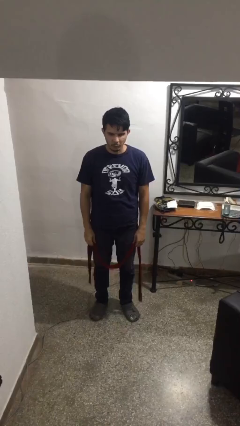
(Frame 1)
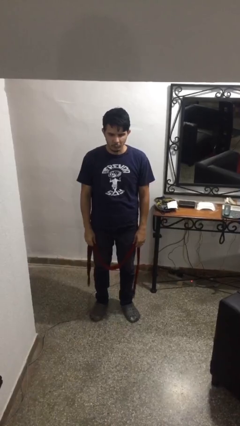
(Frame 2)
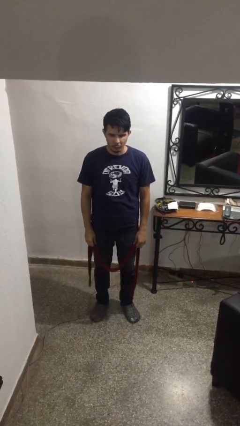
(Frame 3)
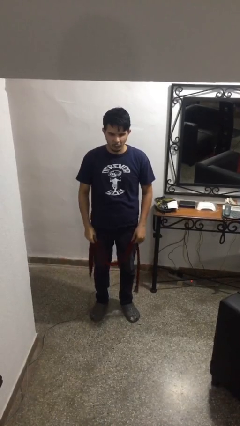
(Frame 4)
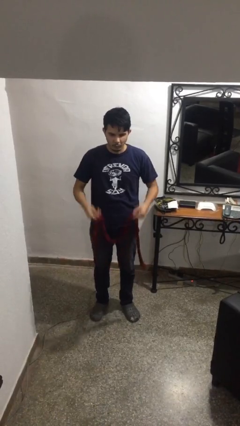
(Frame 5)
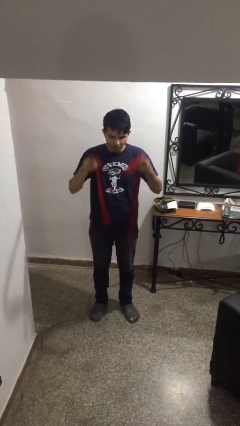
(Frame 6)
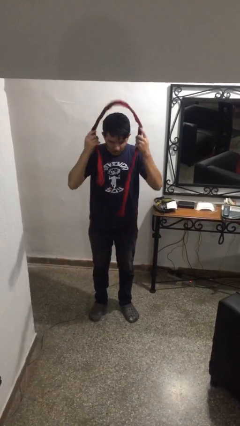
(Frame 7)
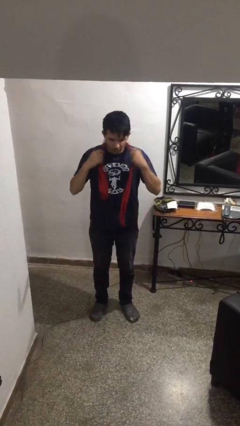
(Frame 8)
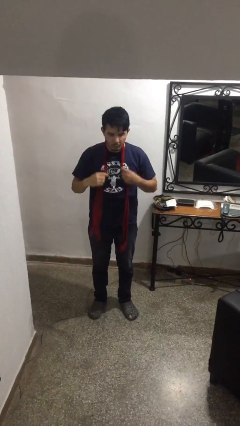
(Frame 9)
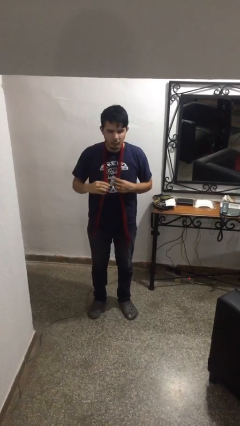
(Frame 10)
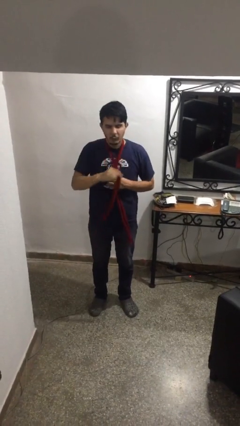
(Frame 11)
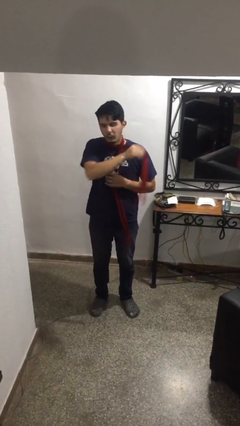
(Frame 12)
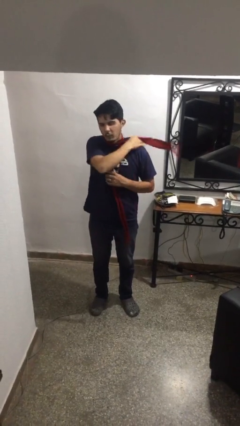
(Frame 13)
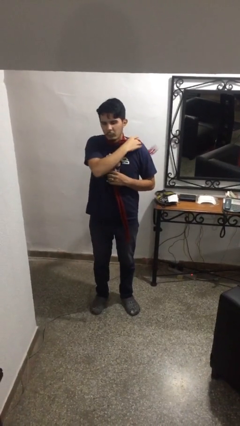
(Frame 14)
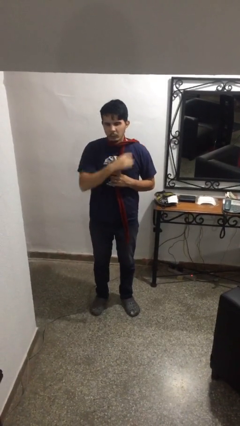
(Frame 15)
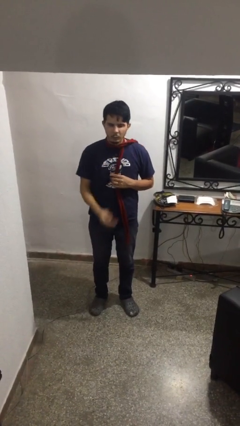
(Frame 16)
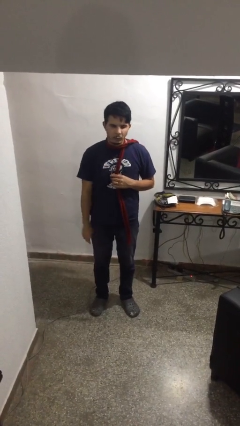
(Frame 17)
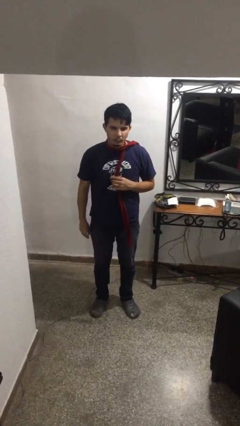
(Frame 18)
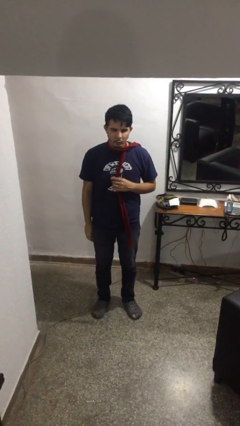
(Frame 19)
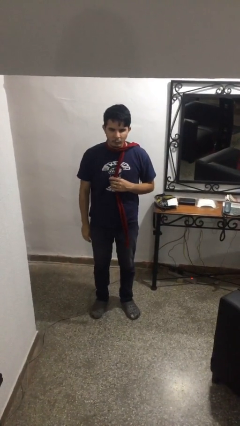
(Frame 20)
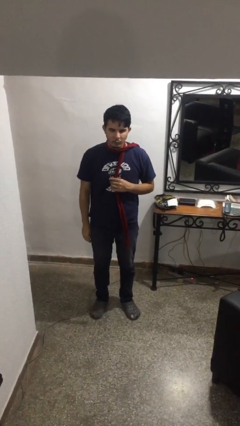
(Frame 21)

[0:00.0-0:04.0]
person puts on scarf

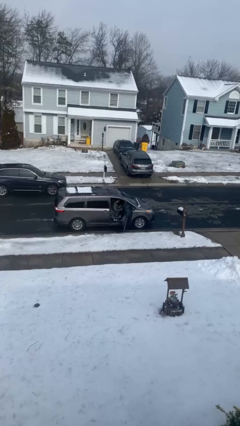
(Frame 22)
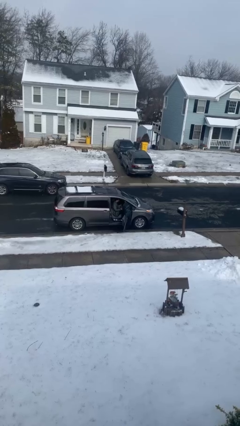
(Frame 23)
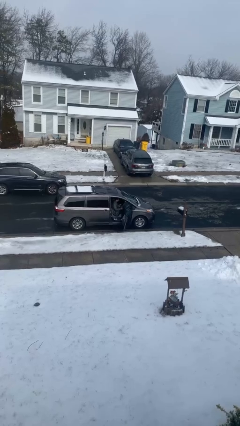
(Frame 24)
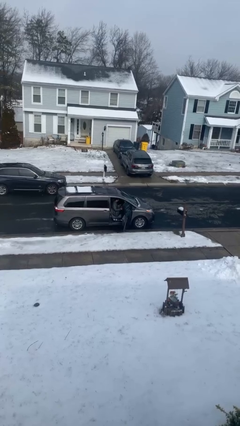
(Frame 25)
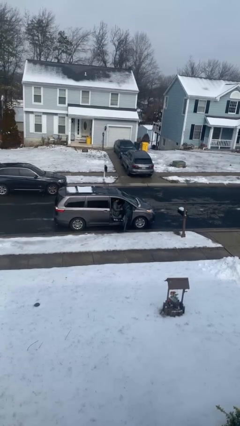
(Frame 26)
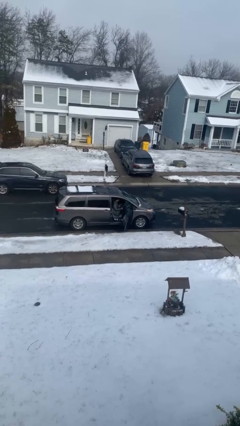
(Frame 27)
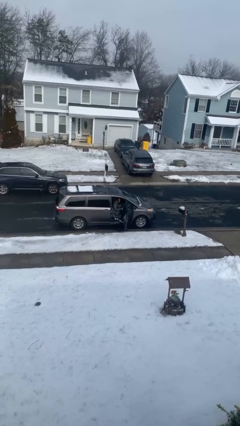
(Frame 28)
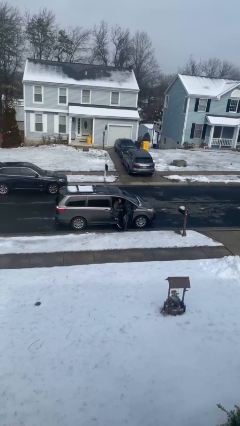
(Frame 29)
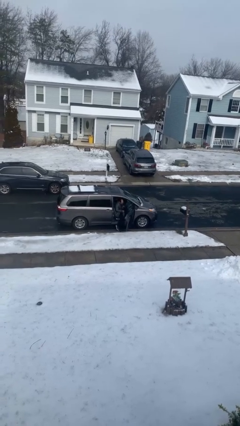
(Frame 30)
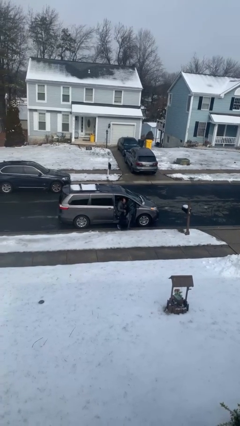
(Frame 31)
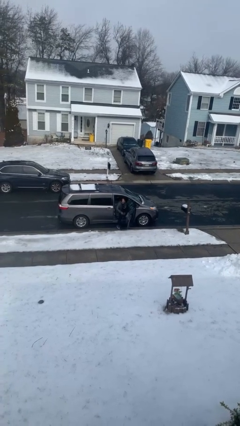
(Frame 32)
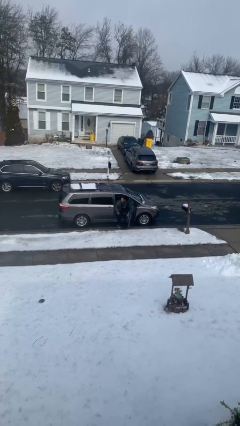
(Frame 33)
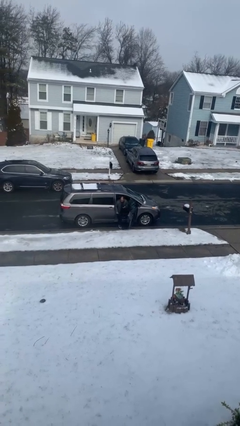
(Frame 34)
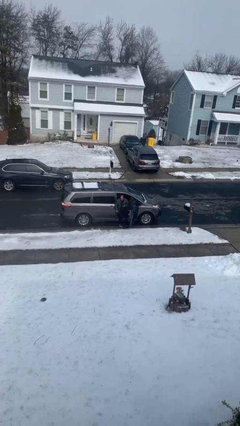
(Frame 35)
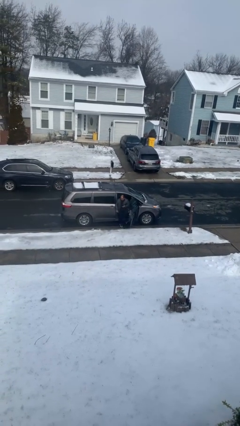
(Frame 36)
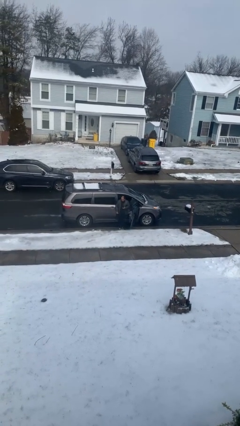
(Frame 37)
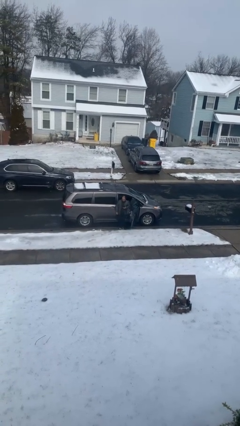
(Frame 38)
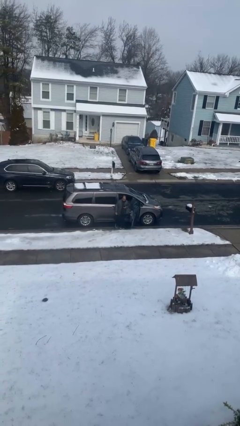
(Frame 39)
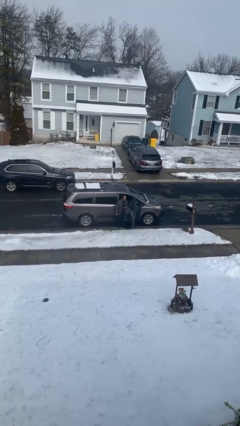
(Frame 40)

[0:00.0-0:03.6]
person exits car

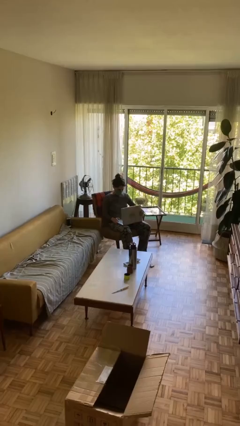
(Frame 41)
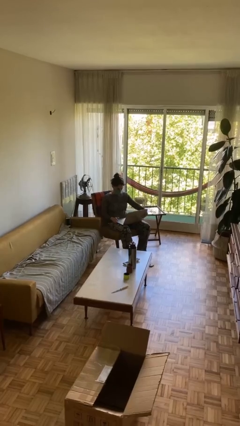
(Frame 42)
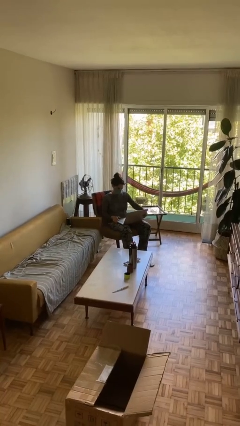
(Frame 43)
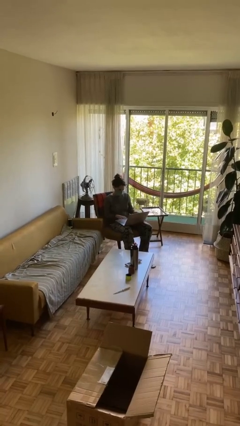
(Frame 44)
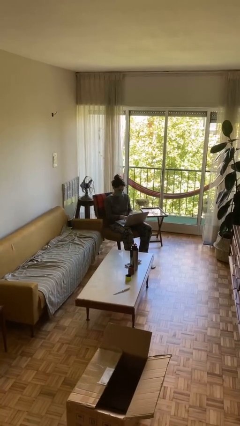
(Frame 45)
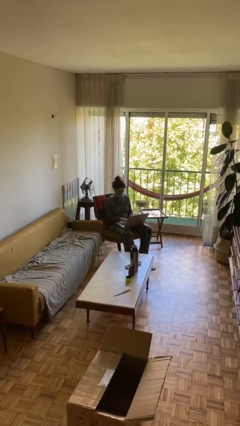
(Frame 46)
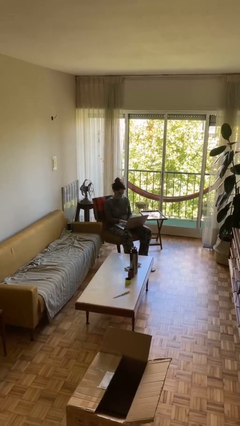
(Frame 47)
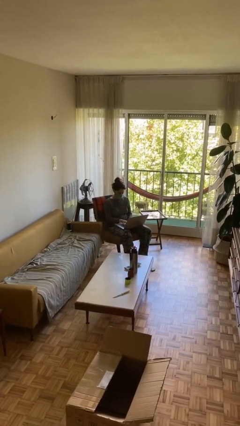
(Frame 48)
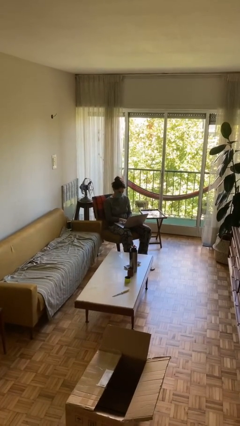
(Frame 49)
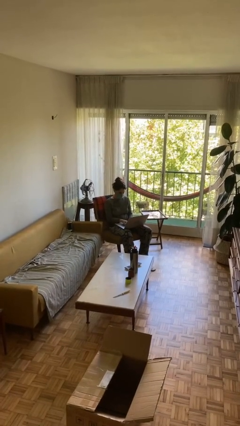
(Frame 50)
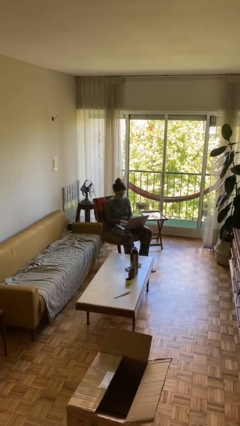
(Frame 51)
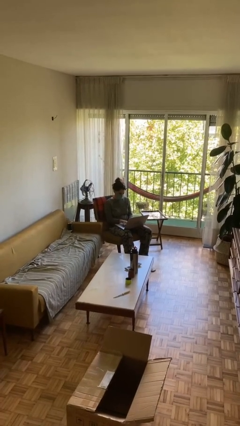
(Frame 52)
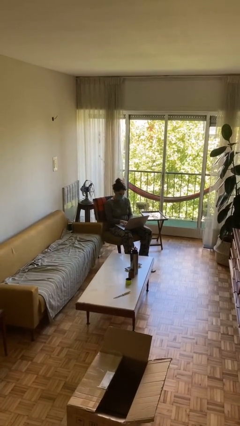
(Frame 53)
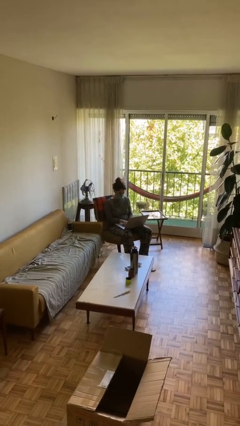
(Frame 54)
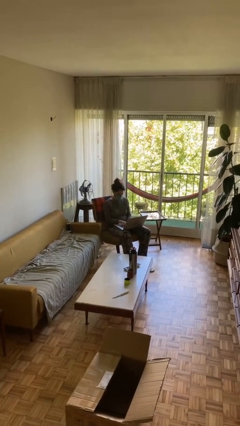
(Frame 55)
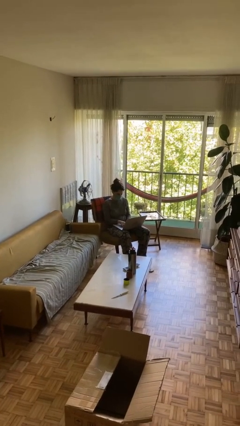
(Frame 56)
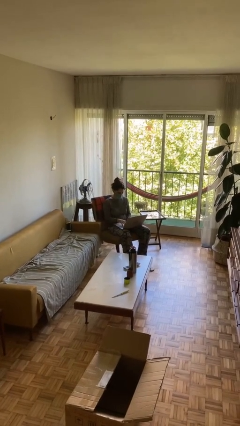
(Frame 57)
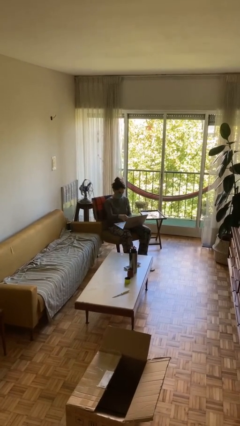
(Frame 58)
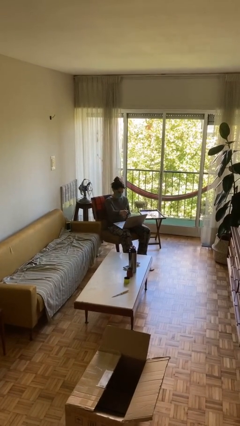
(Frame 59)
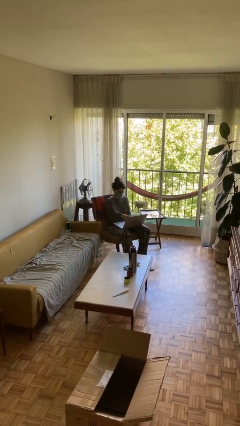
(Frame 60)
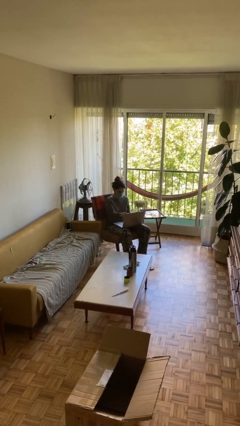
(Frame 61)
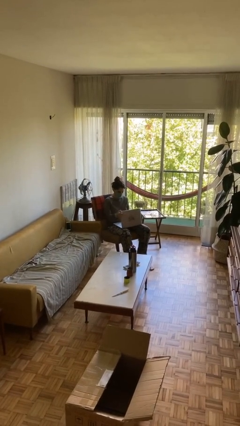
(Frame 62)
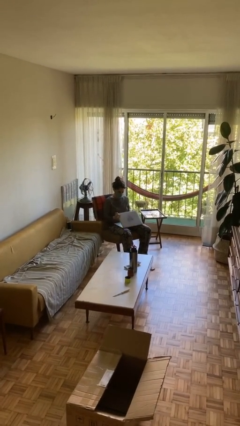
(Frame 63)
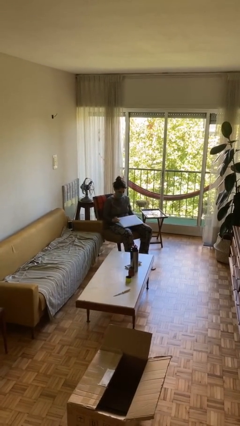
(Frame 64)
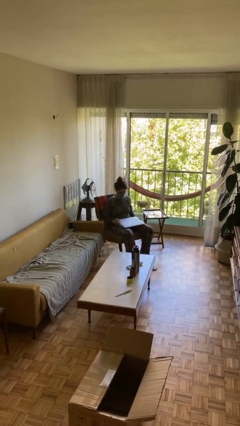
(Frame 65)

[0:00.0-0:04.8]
person interacts with laptop

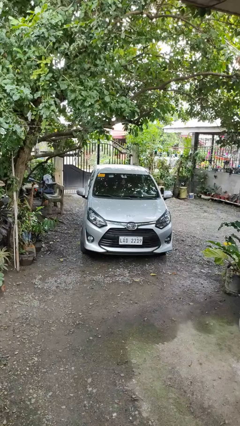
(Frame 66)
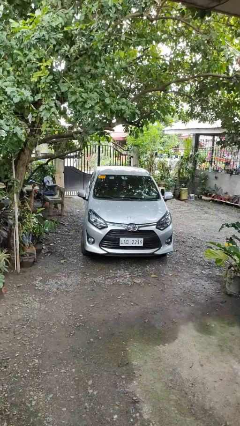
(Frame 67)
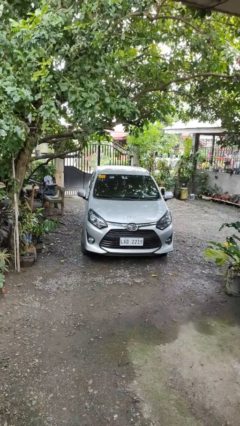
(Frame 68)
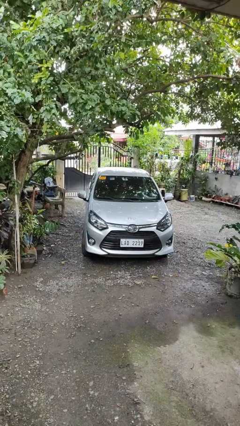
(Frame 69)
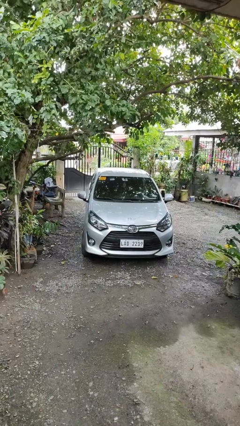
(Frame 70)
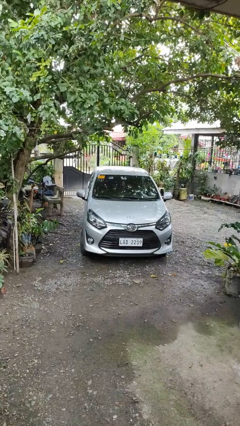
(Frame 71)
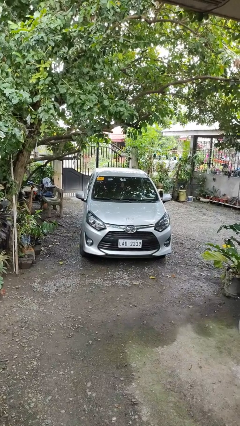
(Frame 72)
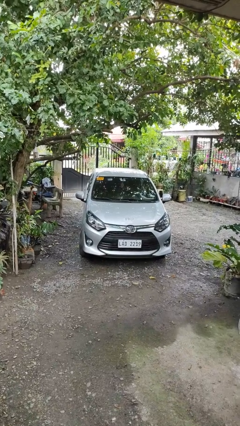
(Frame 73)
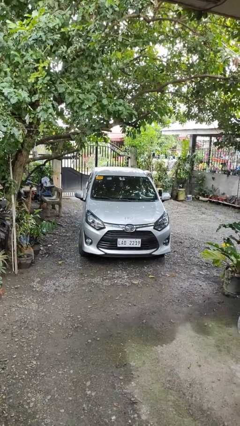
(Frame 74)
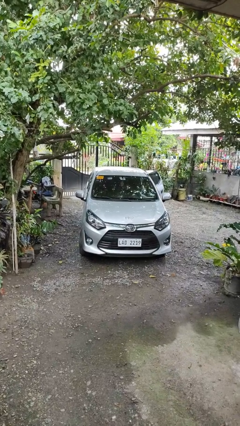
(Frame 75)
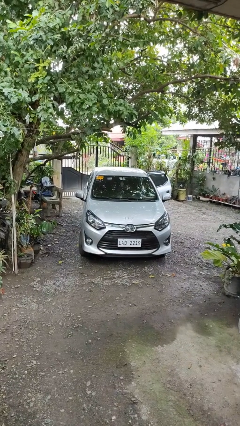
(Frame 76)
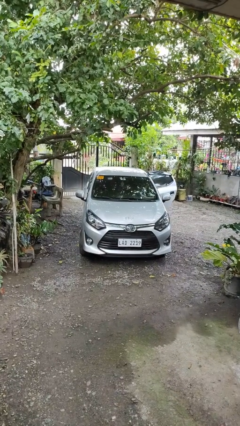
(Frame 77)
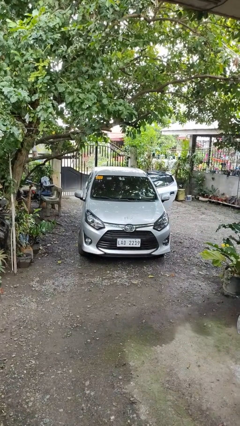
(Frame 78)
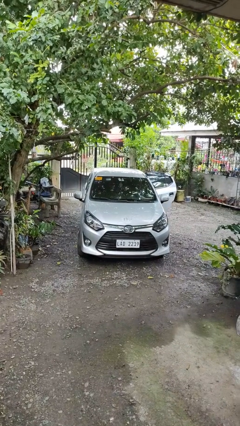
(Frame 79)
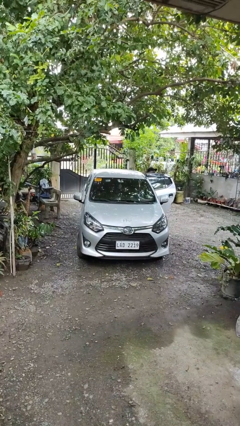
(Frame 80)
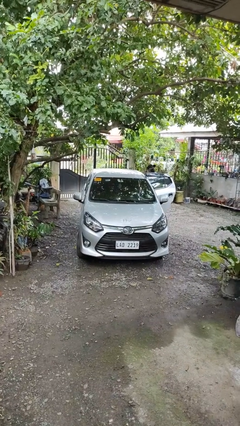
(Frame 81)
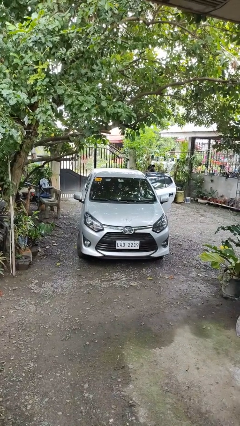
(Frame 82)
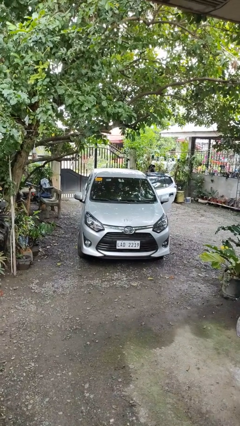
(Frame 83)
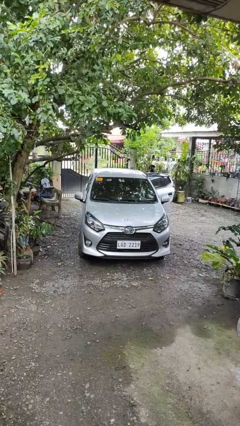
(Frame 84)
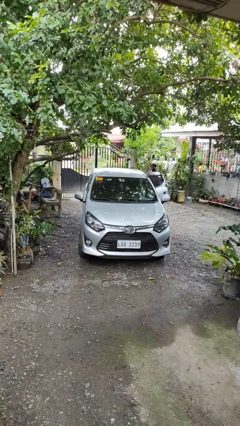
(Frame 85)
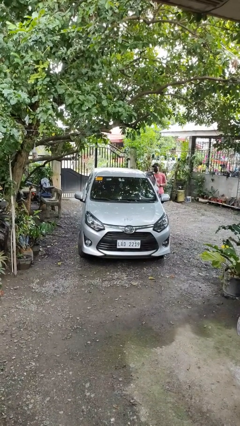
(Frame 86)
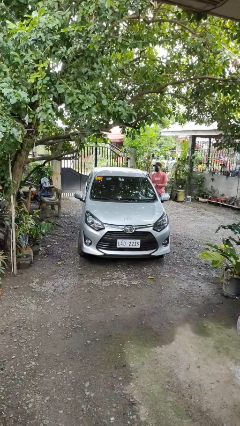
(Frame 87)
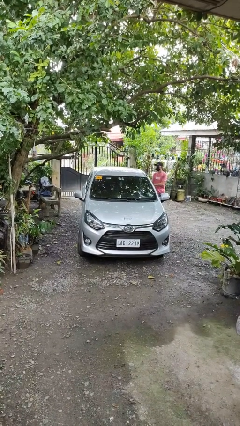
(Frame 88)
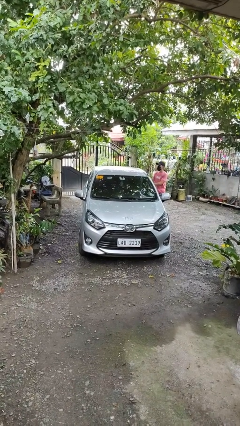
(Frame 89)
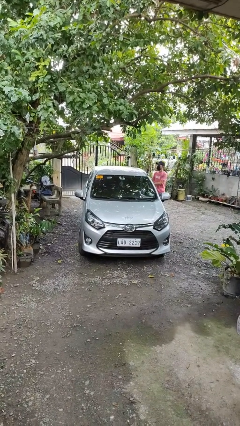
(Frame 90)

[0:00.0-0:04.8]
car drops off person

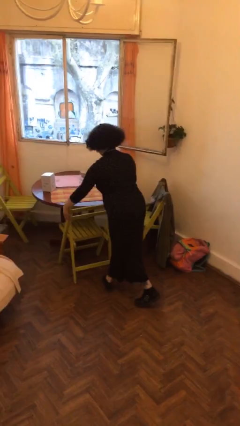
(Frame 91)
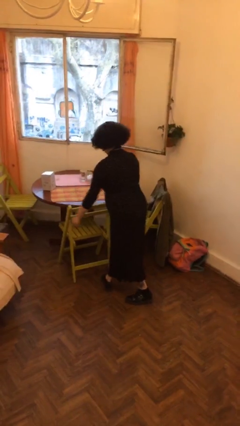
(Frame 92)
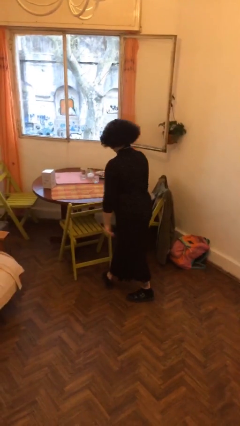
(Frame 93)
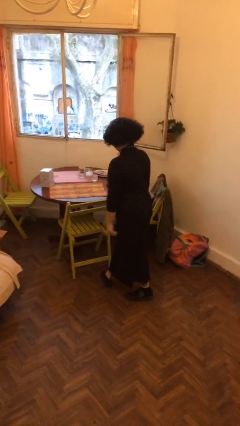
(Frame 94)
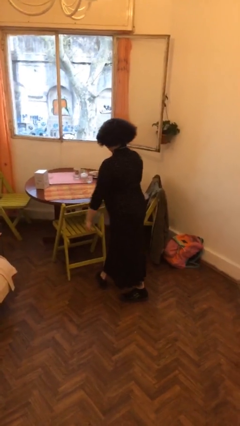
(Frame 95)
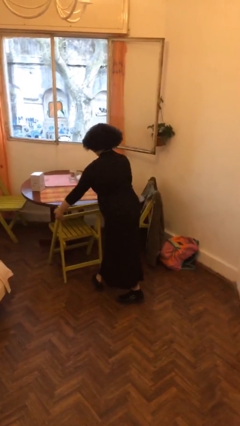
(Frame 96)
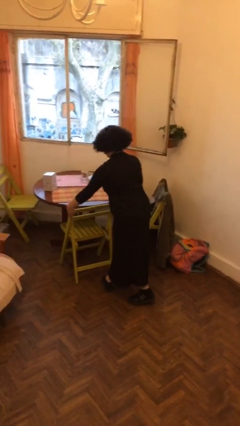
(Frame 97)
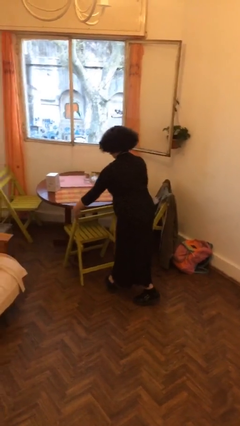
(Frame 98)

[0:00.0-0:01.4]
person pulls out chair
